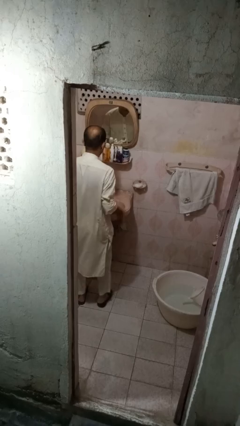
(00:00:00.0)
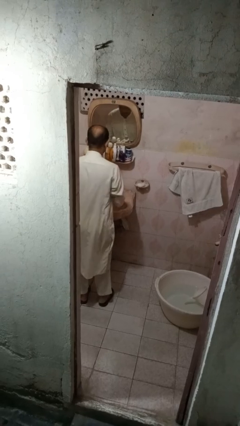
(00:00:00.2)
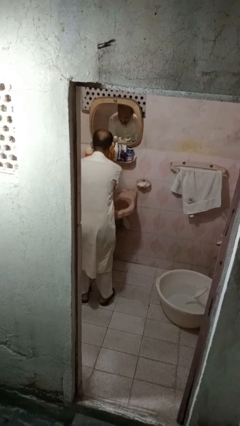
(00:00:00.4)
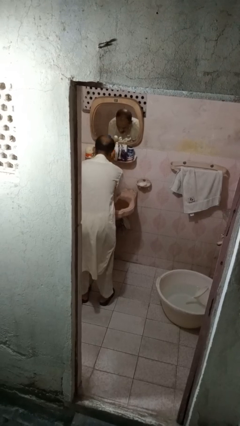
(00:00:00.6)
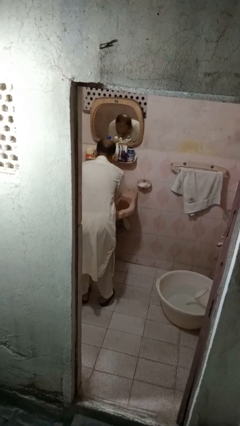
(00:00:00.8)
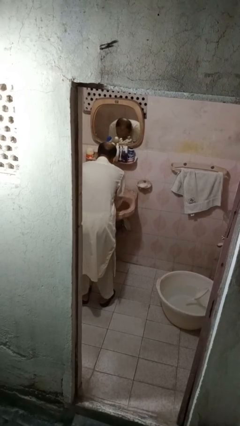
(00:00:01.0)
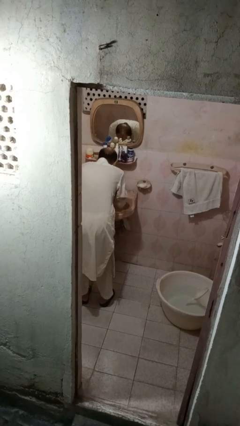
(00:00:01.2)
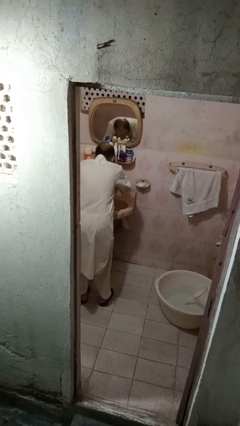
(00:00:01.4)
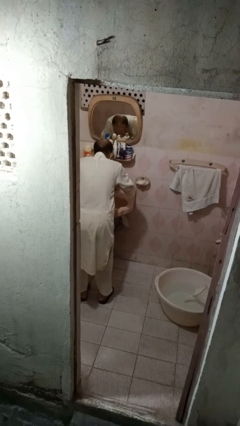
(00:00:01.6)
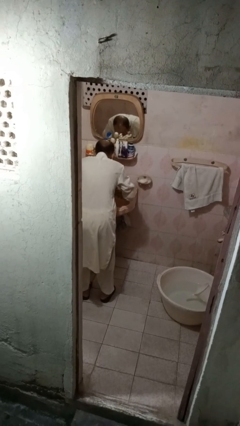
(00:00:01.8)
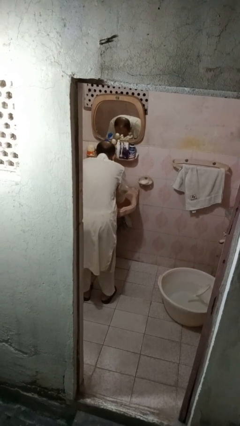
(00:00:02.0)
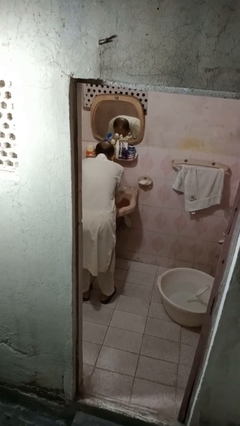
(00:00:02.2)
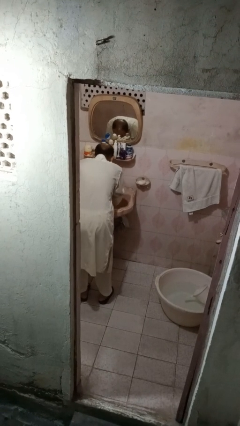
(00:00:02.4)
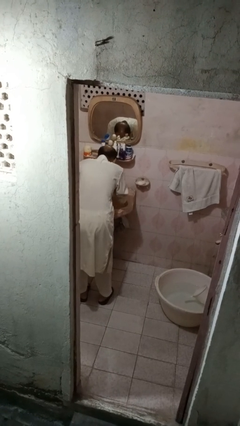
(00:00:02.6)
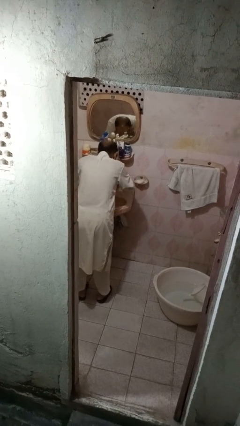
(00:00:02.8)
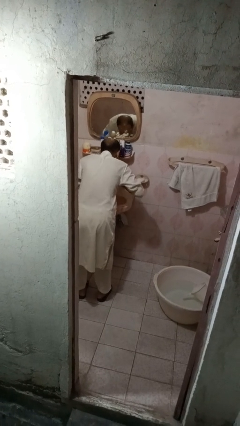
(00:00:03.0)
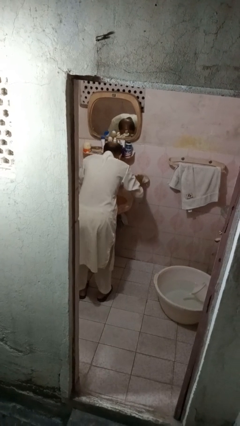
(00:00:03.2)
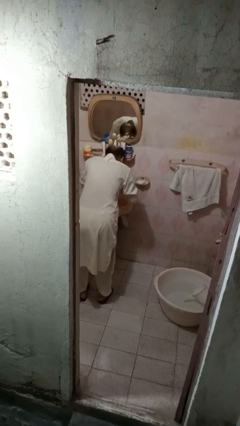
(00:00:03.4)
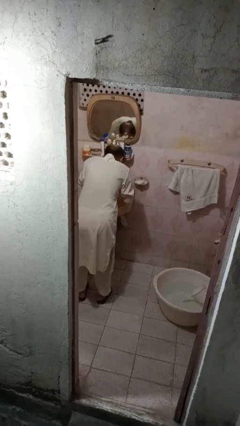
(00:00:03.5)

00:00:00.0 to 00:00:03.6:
person washes face

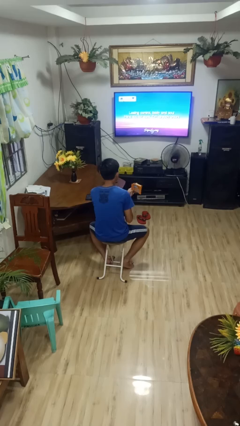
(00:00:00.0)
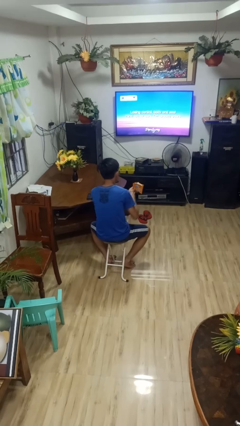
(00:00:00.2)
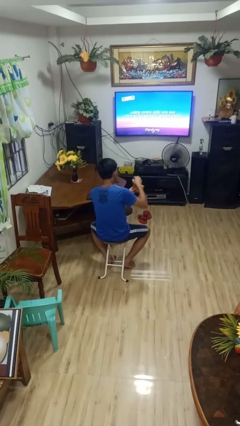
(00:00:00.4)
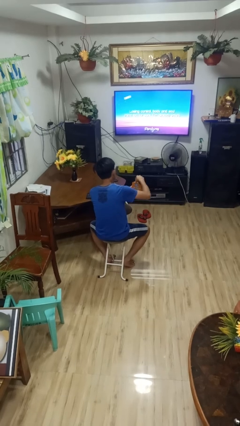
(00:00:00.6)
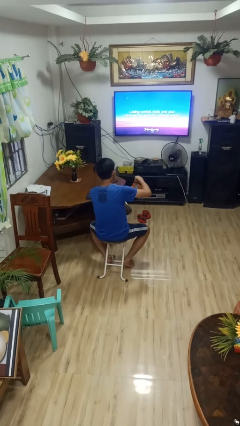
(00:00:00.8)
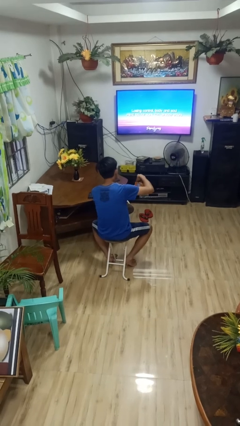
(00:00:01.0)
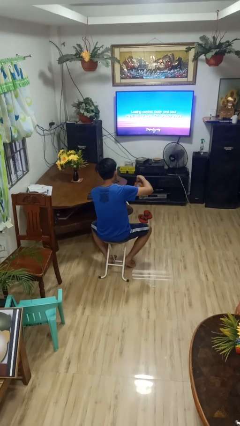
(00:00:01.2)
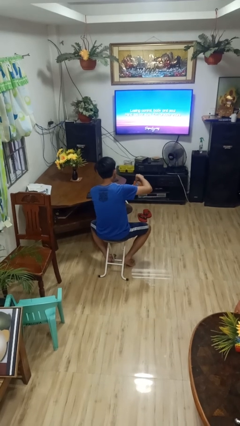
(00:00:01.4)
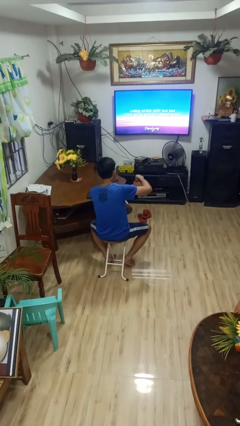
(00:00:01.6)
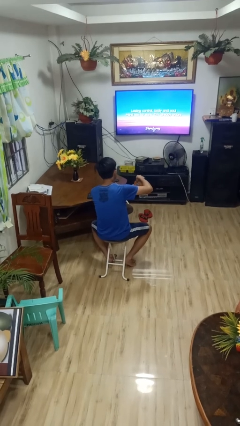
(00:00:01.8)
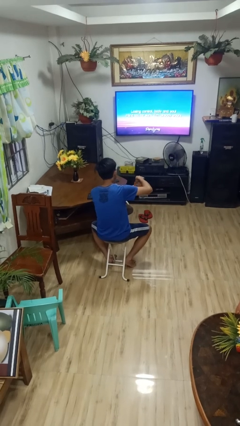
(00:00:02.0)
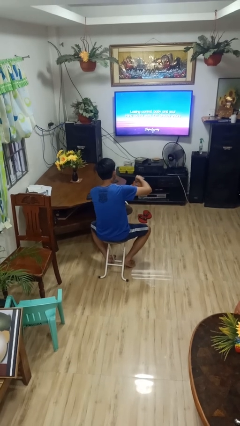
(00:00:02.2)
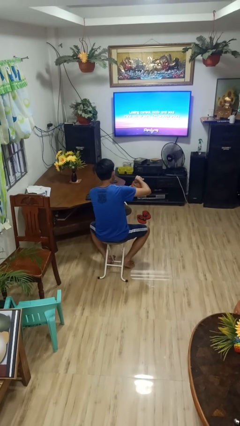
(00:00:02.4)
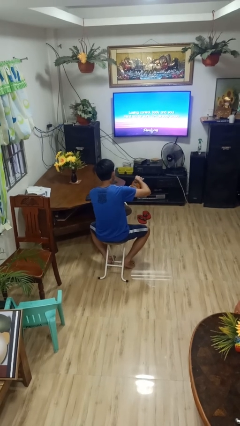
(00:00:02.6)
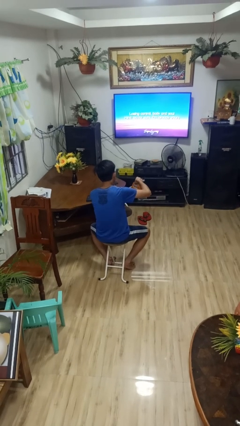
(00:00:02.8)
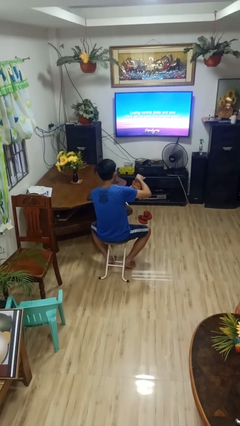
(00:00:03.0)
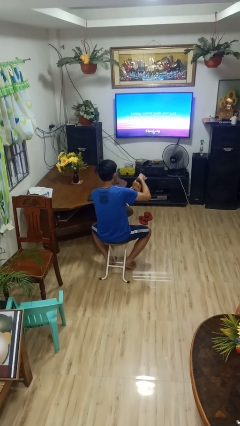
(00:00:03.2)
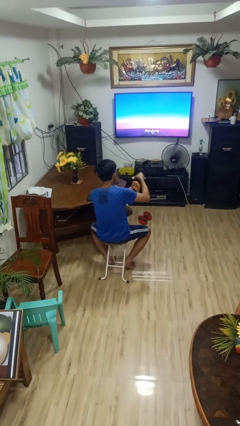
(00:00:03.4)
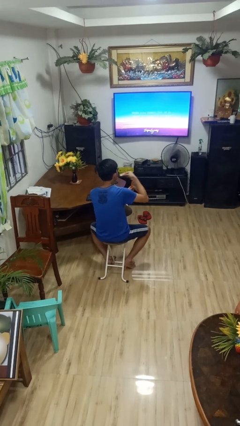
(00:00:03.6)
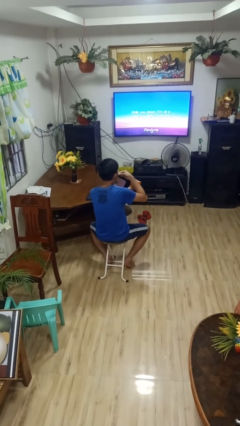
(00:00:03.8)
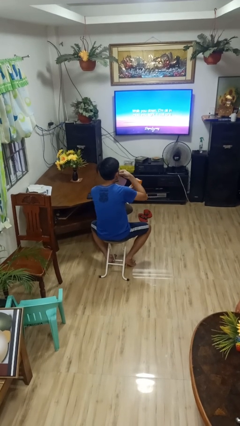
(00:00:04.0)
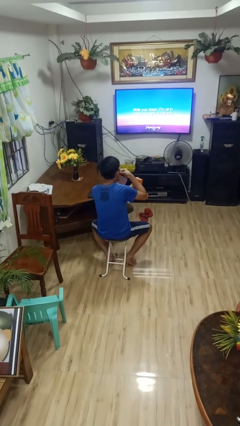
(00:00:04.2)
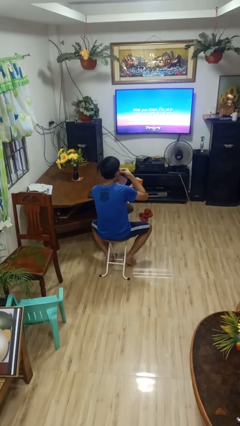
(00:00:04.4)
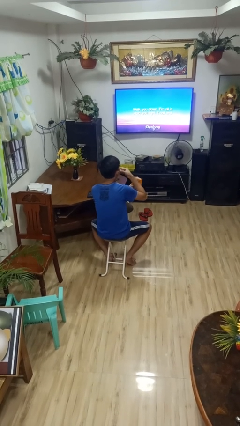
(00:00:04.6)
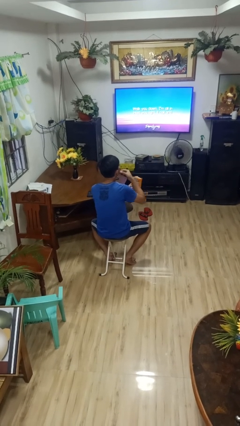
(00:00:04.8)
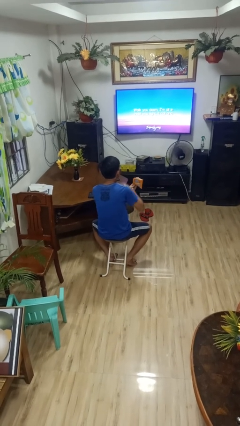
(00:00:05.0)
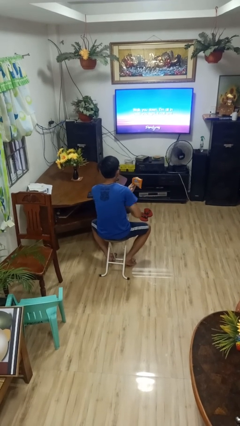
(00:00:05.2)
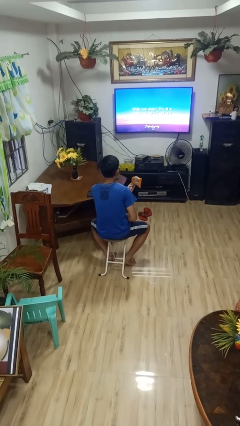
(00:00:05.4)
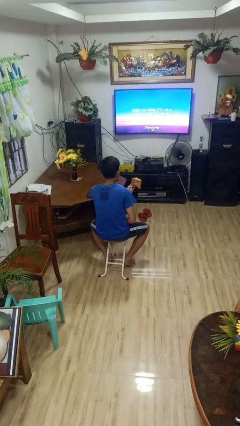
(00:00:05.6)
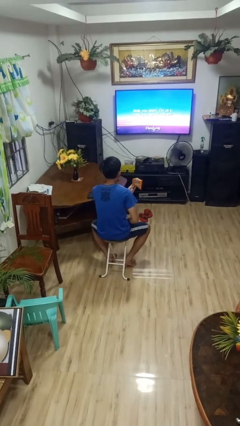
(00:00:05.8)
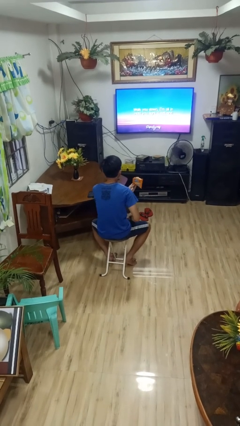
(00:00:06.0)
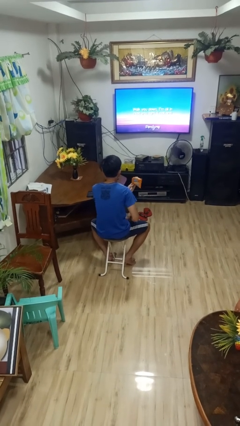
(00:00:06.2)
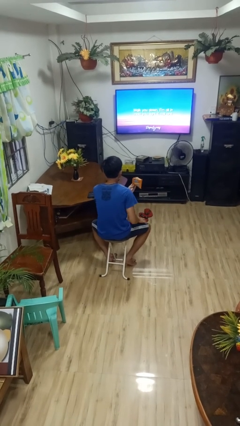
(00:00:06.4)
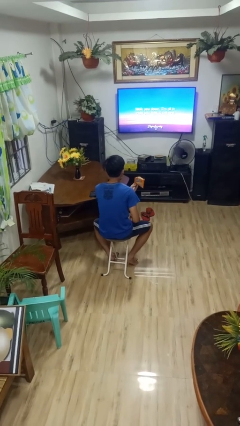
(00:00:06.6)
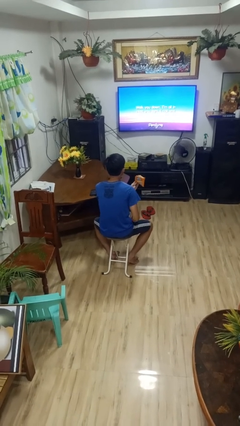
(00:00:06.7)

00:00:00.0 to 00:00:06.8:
person eats snack from bag

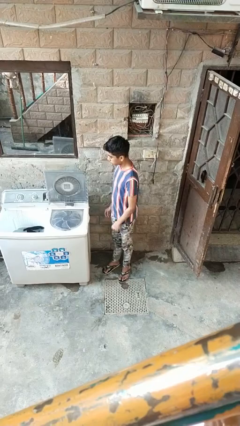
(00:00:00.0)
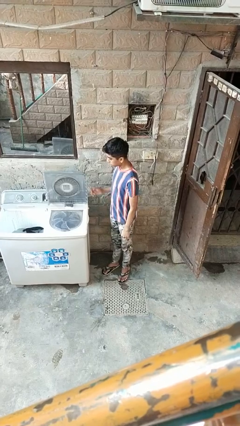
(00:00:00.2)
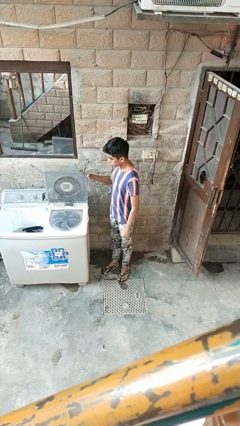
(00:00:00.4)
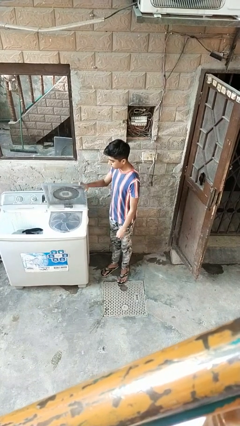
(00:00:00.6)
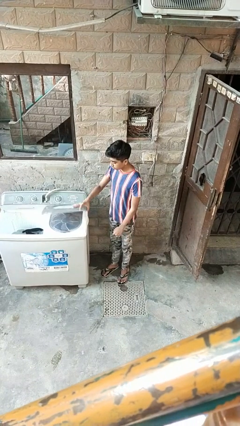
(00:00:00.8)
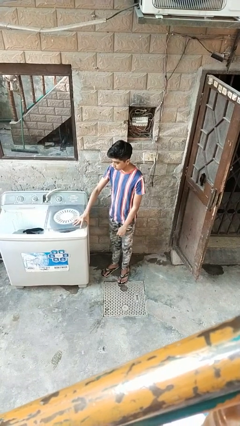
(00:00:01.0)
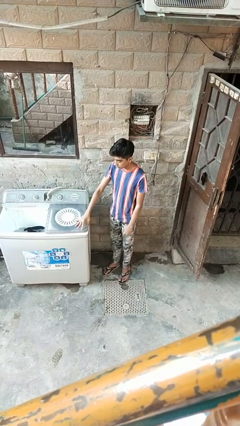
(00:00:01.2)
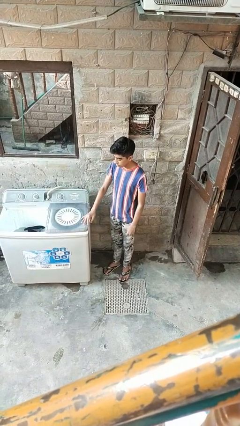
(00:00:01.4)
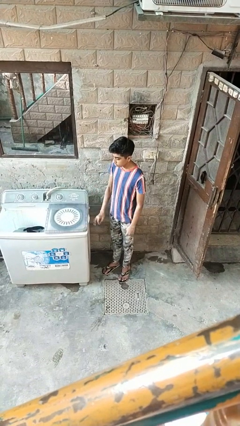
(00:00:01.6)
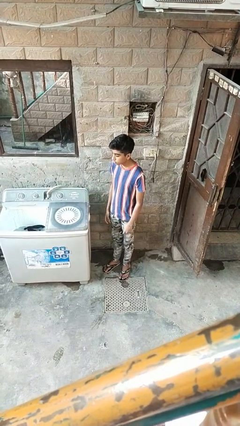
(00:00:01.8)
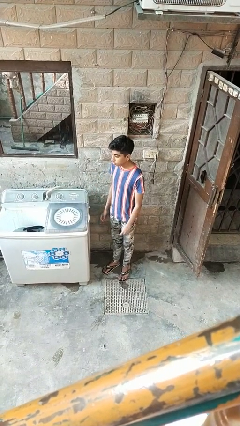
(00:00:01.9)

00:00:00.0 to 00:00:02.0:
person closes clothes washer

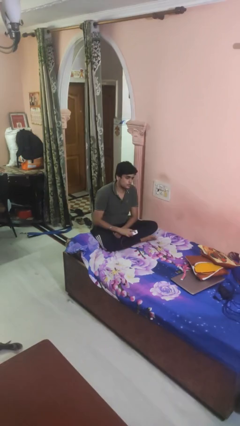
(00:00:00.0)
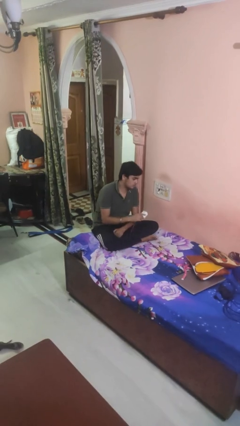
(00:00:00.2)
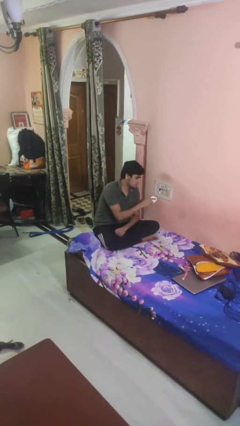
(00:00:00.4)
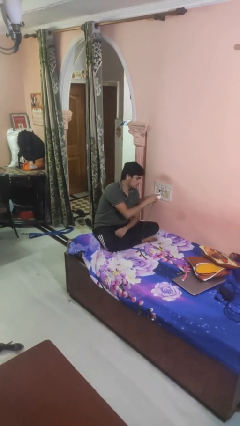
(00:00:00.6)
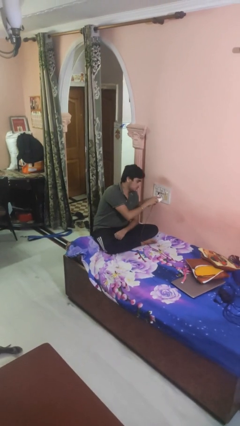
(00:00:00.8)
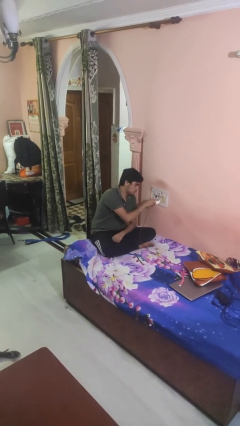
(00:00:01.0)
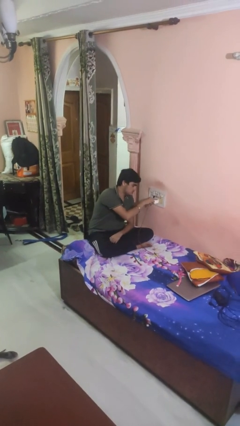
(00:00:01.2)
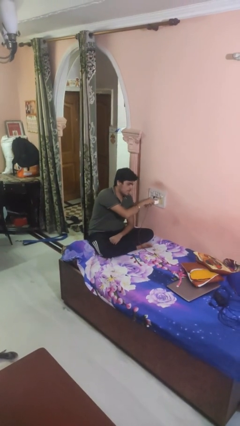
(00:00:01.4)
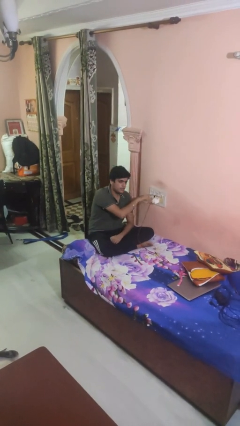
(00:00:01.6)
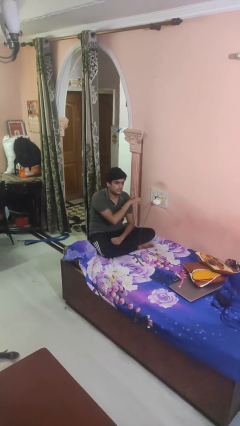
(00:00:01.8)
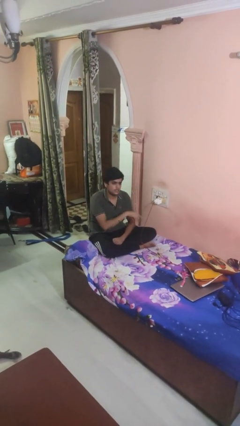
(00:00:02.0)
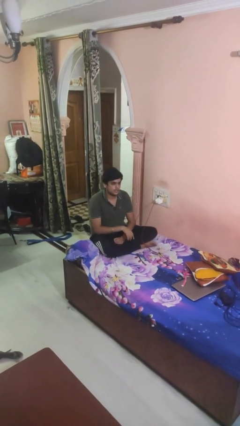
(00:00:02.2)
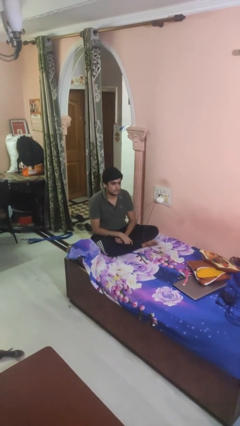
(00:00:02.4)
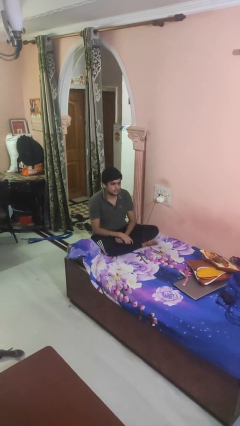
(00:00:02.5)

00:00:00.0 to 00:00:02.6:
person plugs into electrical socket

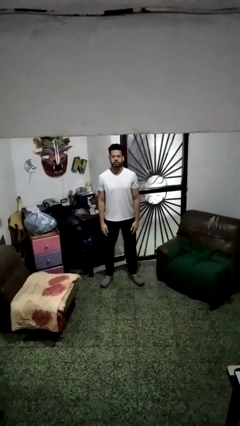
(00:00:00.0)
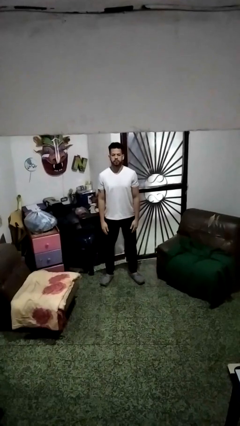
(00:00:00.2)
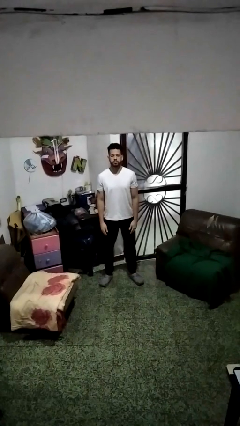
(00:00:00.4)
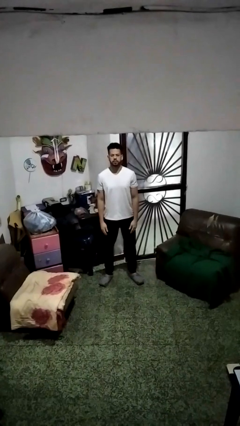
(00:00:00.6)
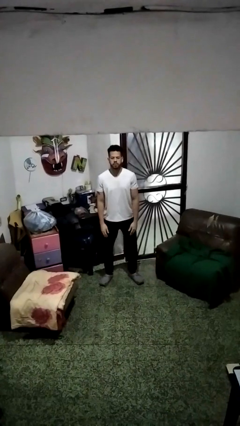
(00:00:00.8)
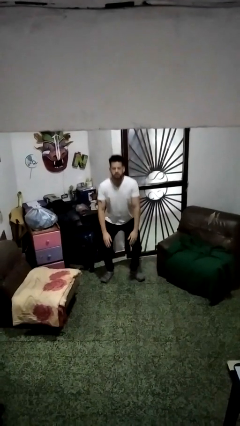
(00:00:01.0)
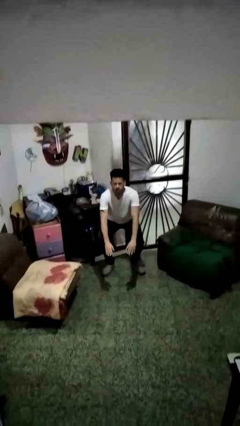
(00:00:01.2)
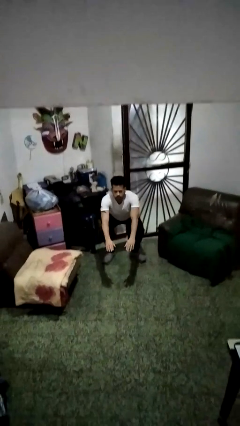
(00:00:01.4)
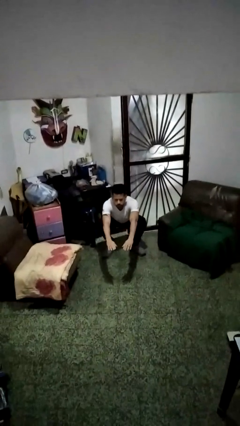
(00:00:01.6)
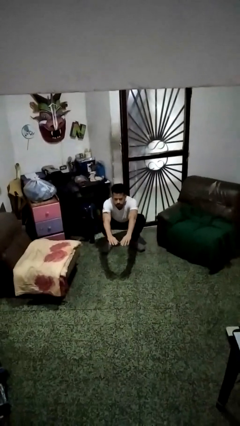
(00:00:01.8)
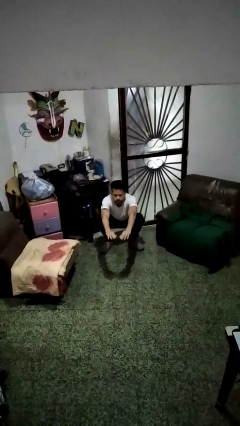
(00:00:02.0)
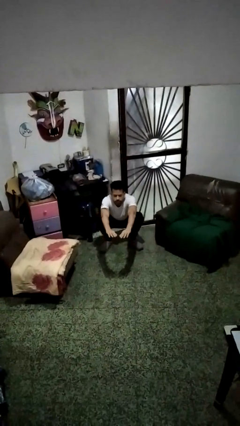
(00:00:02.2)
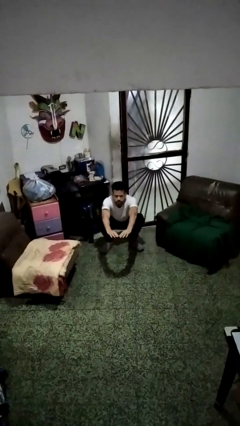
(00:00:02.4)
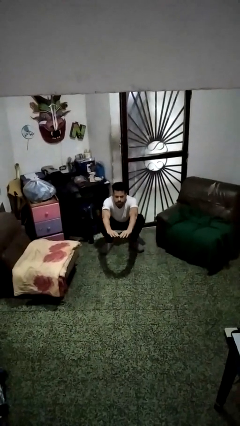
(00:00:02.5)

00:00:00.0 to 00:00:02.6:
person squats
